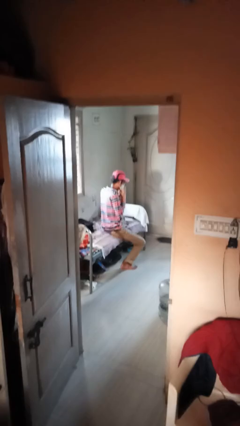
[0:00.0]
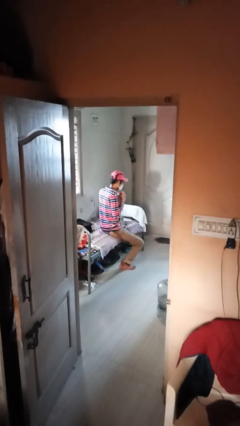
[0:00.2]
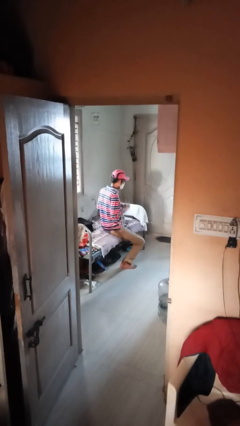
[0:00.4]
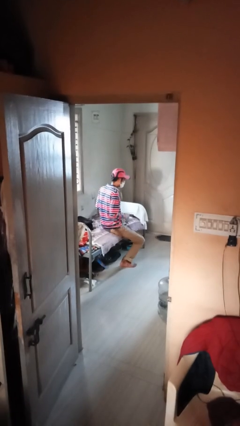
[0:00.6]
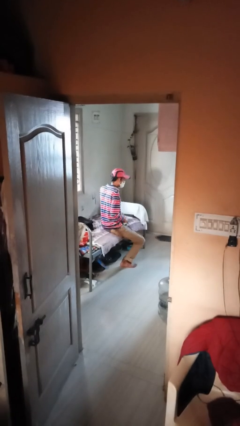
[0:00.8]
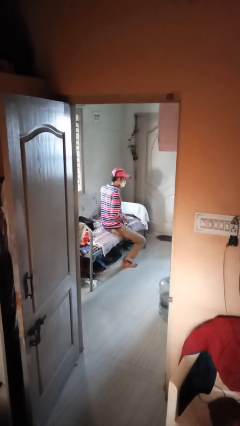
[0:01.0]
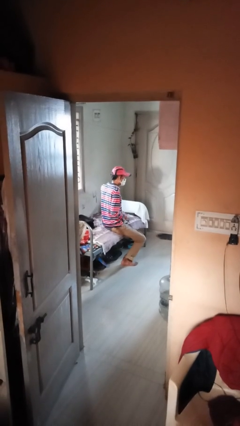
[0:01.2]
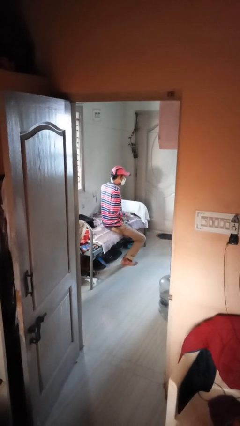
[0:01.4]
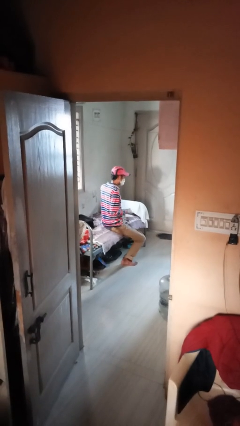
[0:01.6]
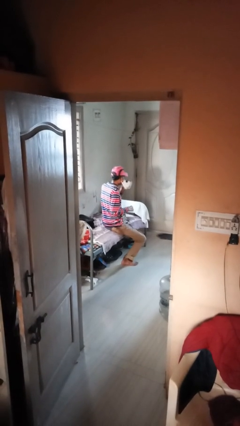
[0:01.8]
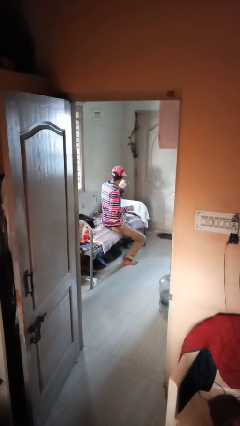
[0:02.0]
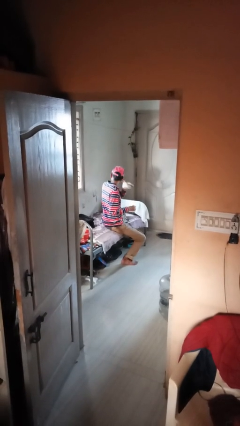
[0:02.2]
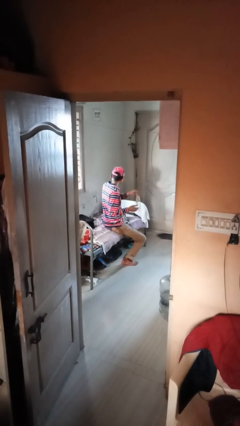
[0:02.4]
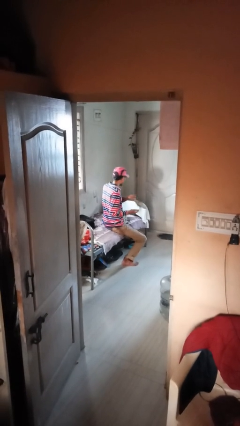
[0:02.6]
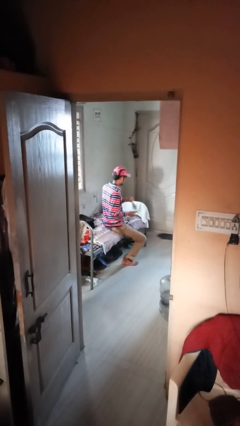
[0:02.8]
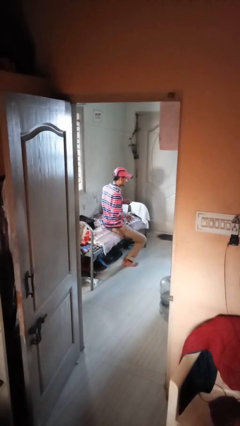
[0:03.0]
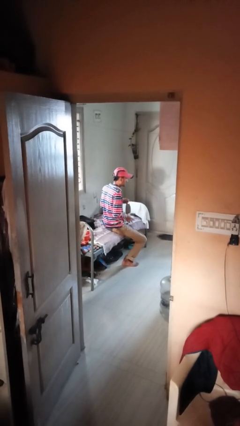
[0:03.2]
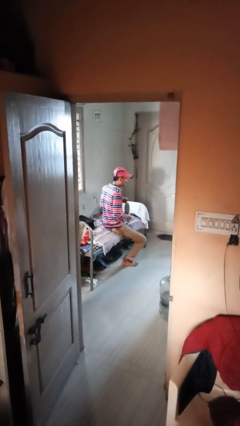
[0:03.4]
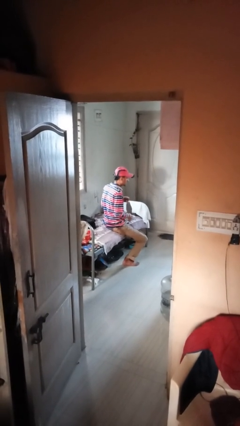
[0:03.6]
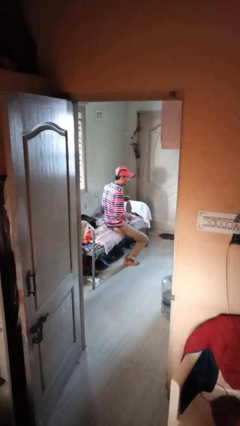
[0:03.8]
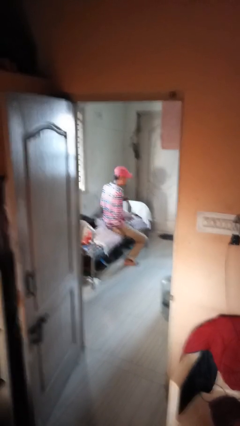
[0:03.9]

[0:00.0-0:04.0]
person takes off facemask

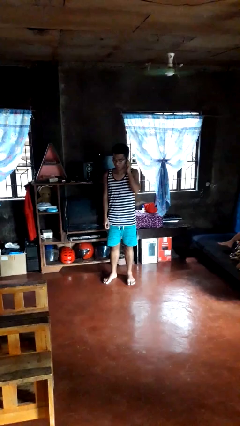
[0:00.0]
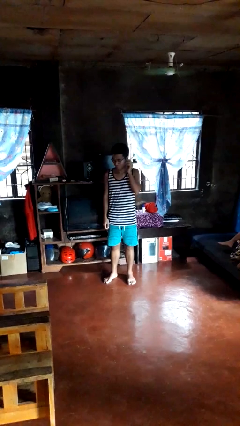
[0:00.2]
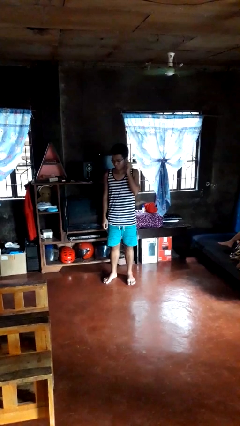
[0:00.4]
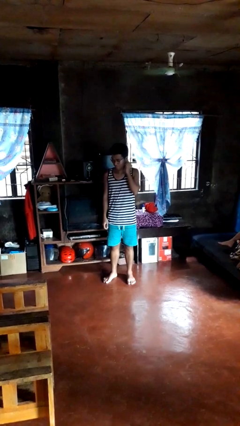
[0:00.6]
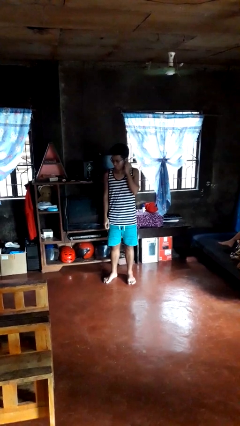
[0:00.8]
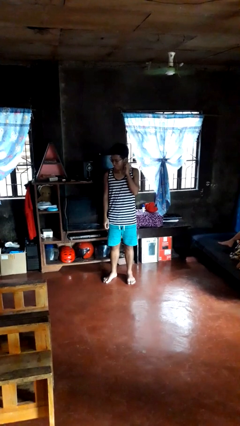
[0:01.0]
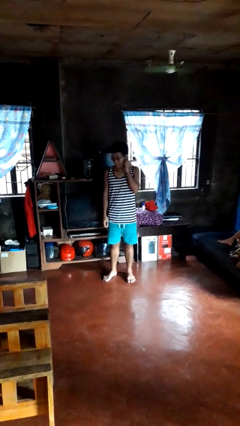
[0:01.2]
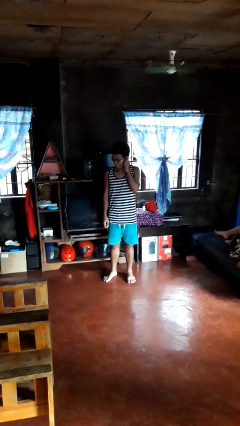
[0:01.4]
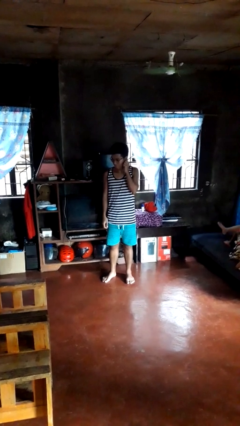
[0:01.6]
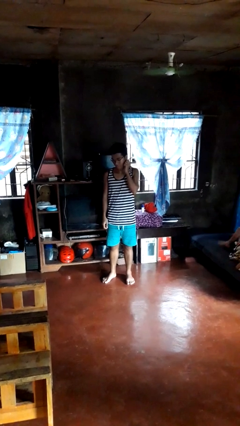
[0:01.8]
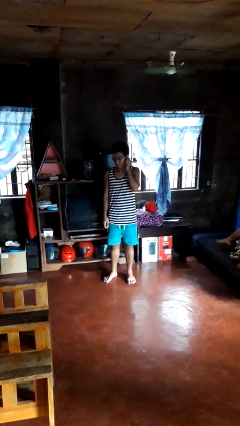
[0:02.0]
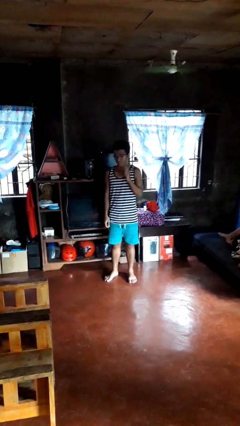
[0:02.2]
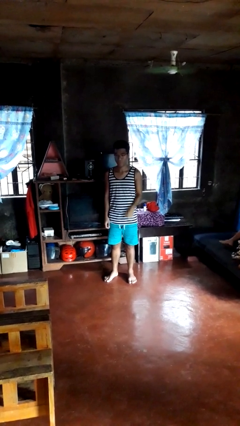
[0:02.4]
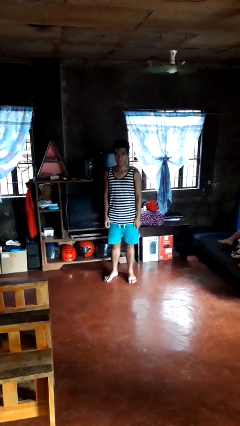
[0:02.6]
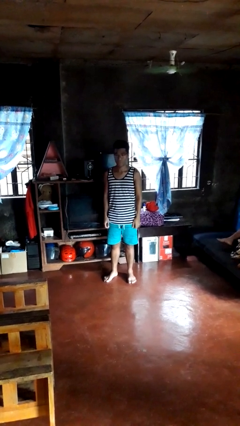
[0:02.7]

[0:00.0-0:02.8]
person touches earlobe

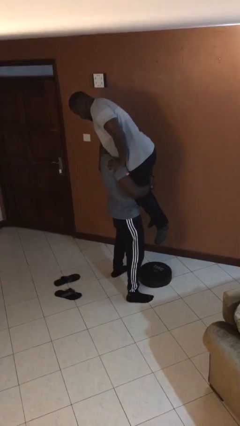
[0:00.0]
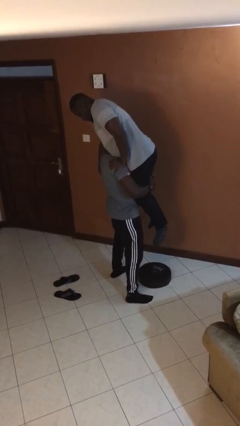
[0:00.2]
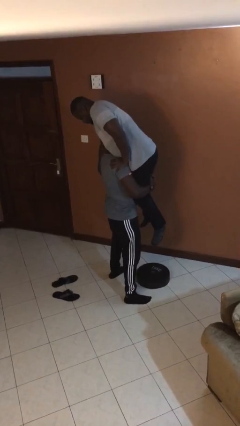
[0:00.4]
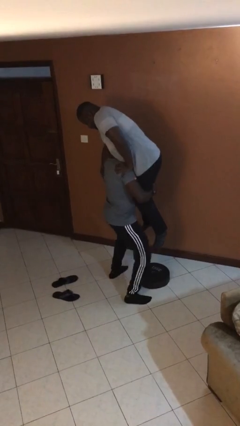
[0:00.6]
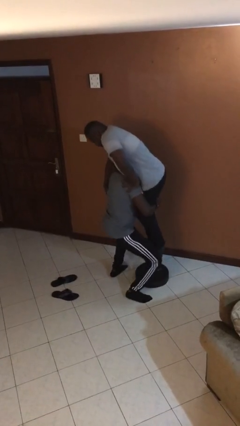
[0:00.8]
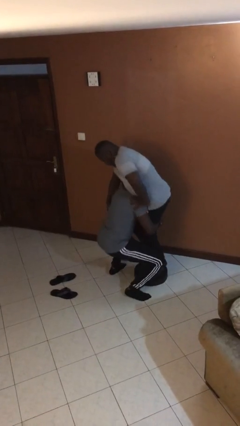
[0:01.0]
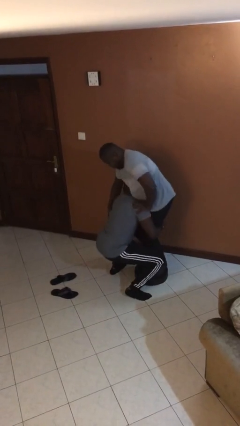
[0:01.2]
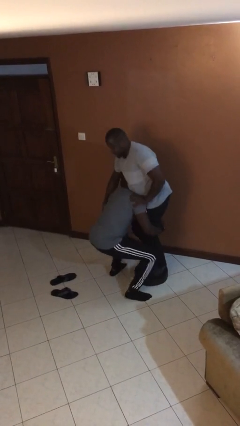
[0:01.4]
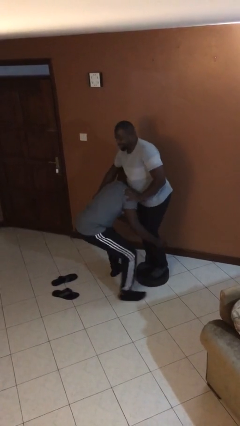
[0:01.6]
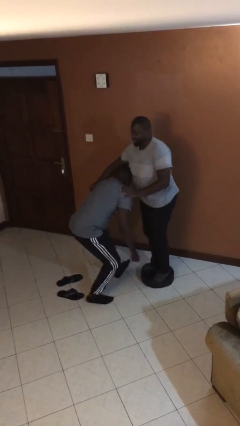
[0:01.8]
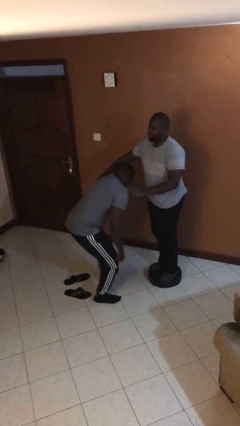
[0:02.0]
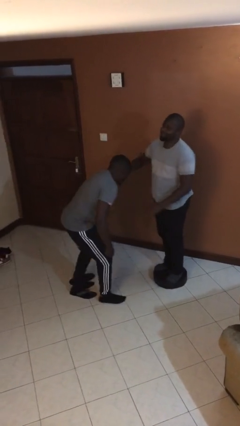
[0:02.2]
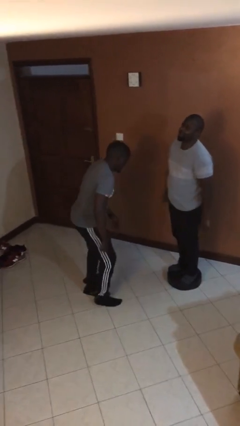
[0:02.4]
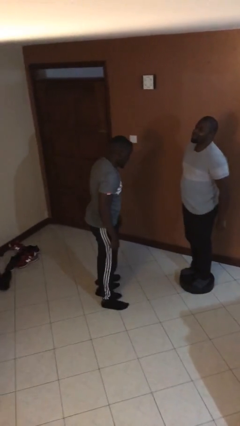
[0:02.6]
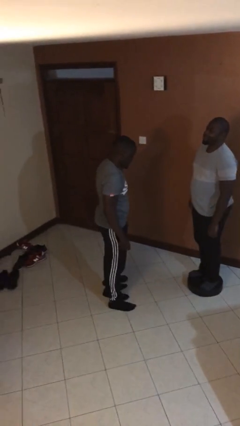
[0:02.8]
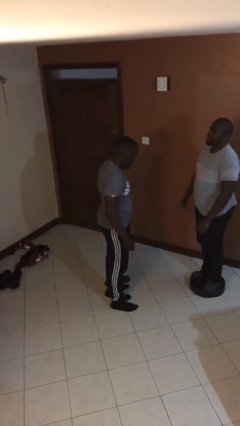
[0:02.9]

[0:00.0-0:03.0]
person puts down person

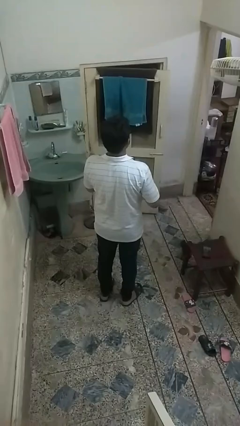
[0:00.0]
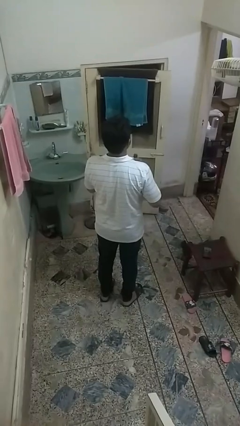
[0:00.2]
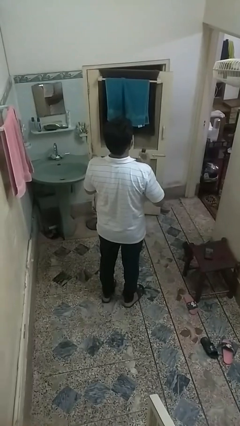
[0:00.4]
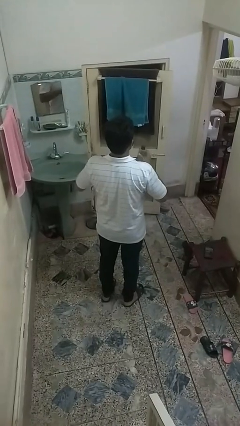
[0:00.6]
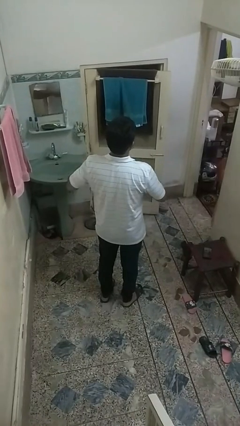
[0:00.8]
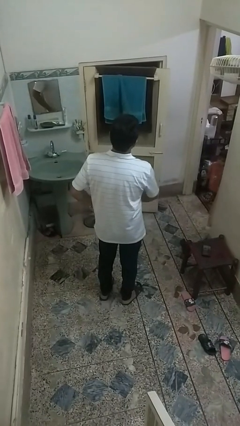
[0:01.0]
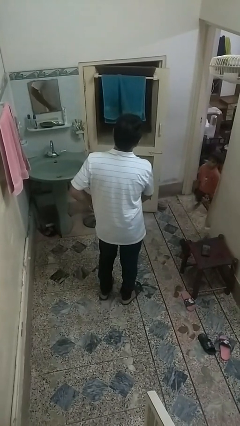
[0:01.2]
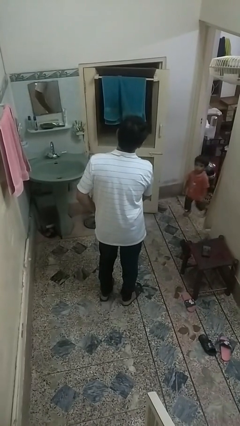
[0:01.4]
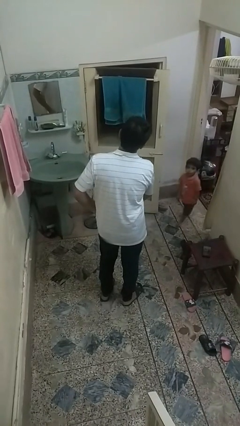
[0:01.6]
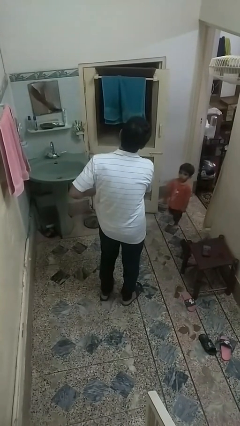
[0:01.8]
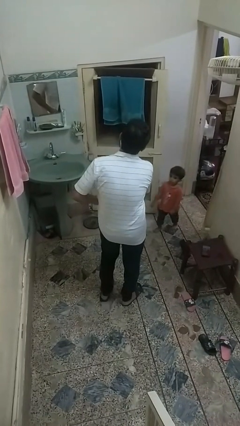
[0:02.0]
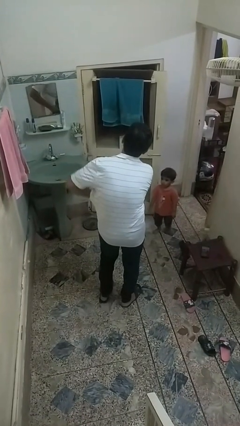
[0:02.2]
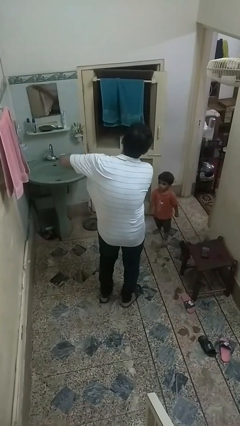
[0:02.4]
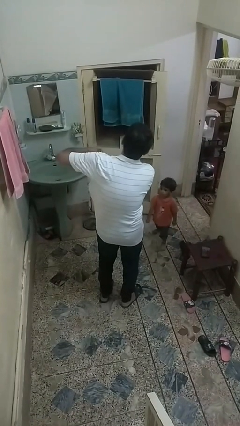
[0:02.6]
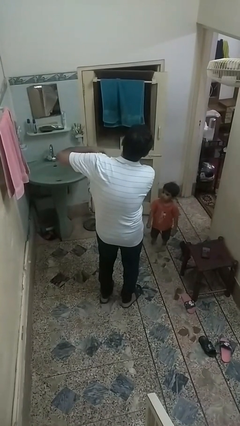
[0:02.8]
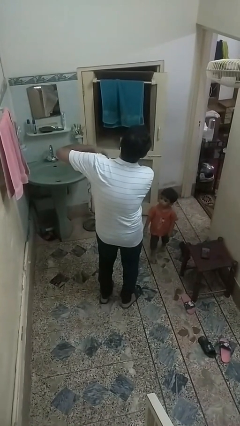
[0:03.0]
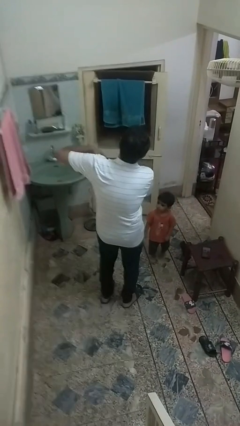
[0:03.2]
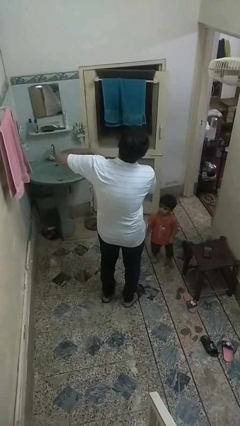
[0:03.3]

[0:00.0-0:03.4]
person applies deodorant

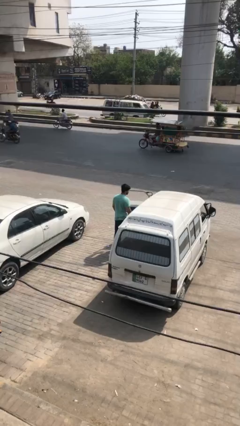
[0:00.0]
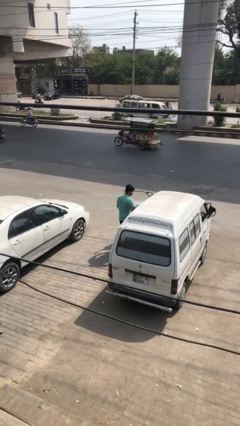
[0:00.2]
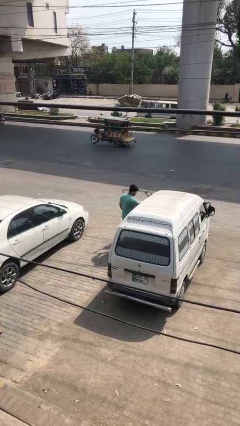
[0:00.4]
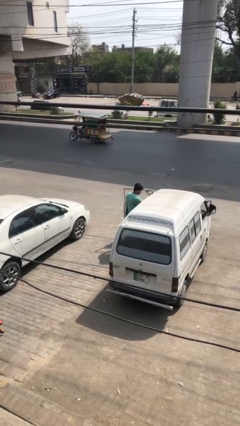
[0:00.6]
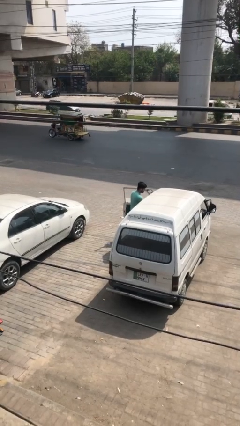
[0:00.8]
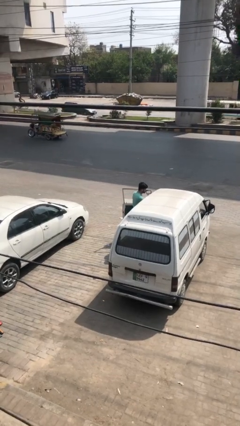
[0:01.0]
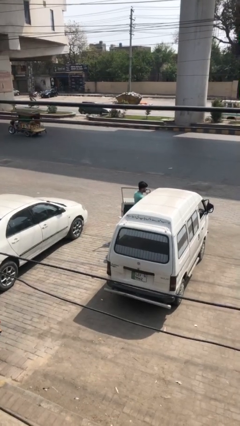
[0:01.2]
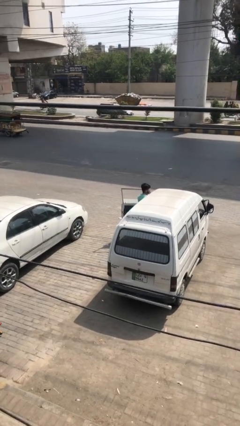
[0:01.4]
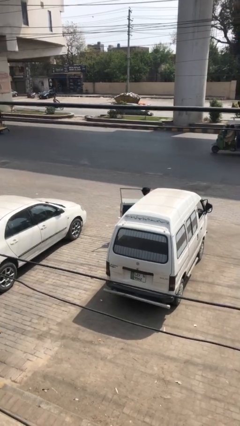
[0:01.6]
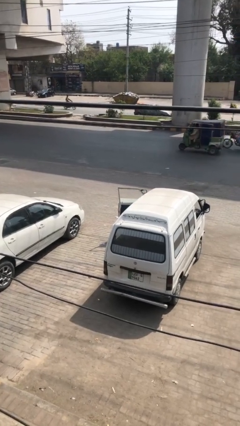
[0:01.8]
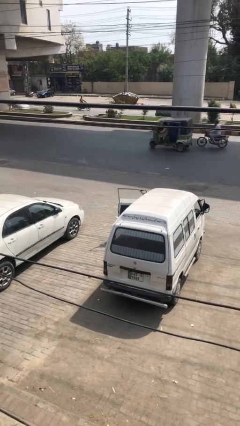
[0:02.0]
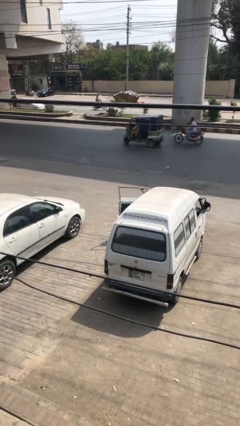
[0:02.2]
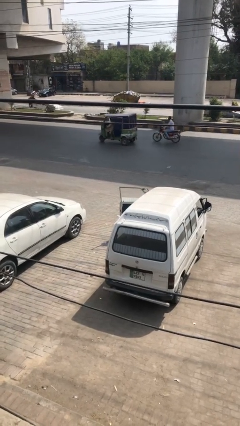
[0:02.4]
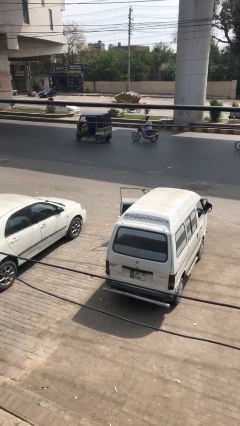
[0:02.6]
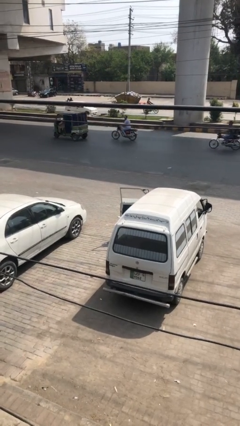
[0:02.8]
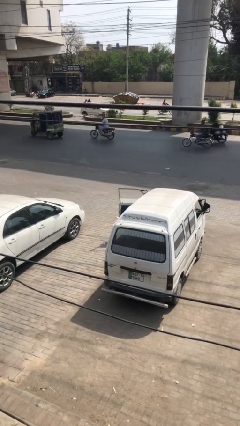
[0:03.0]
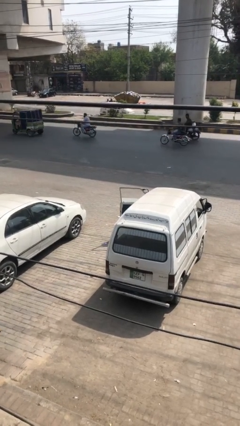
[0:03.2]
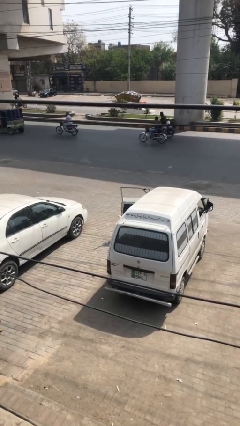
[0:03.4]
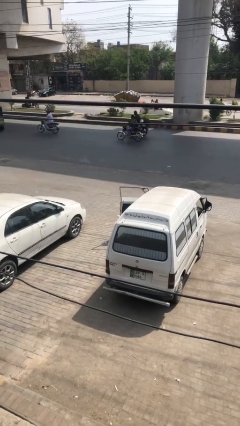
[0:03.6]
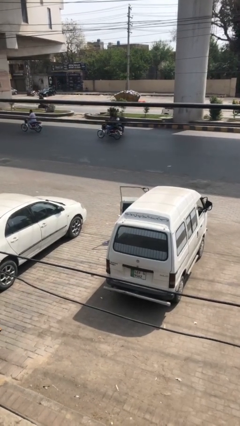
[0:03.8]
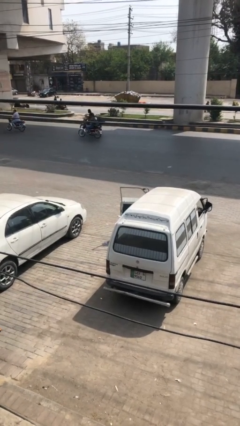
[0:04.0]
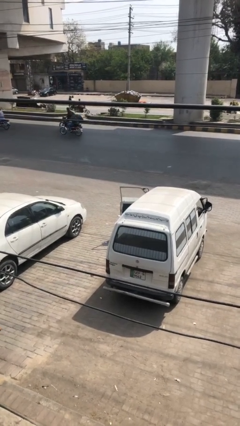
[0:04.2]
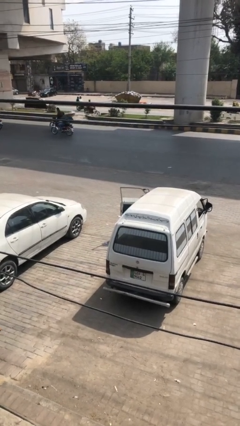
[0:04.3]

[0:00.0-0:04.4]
person enters car

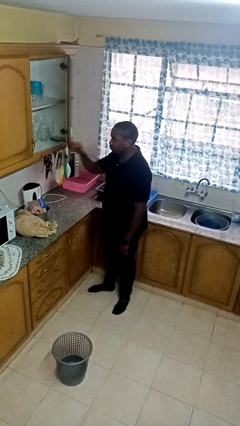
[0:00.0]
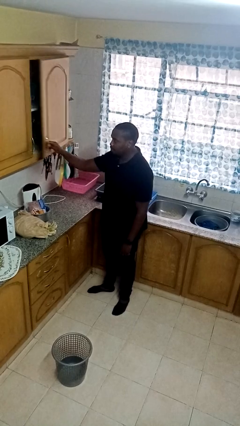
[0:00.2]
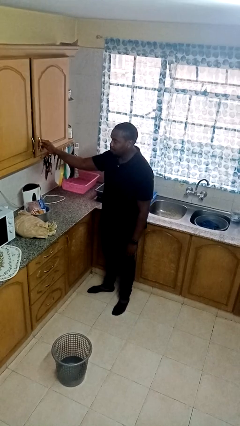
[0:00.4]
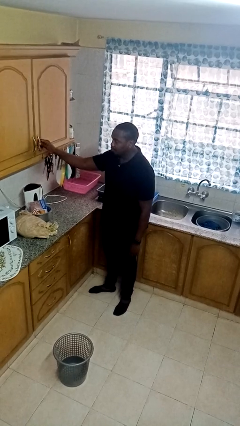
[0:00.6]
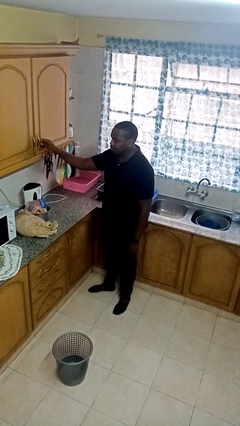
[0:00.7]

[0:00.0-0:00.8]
person opens cabinet
